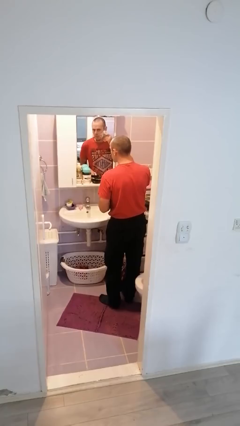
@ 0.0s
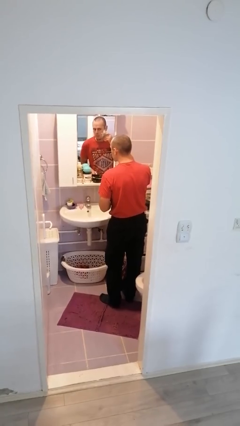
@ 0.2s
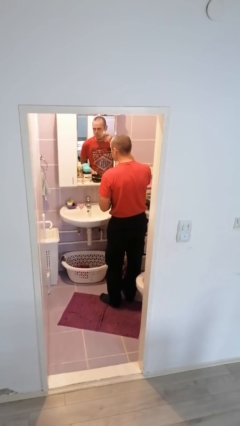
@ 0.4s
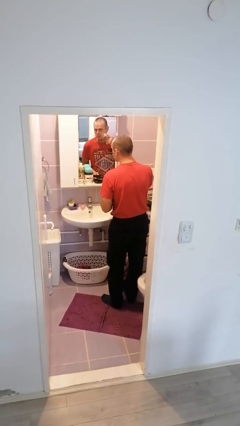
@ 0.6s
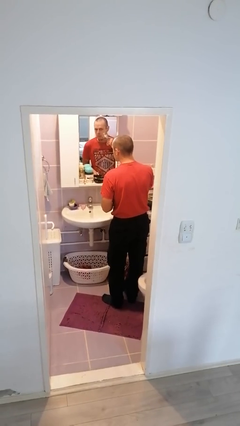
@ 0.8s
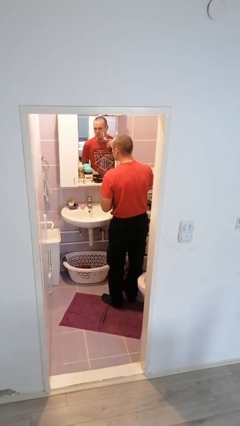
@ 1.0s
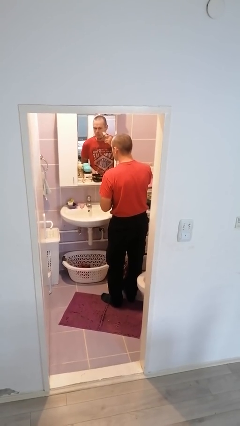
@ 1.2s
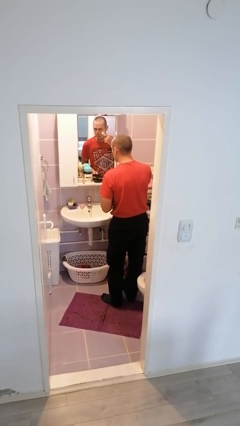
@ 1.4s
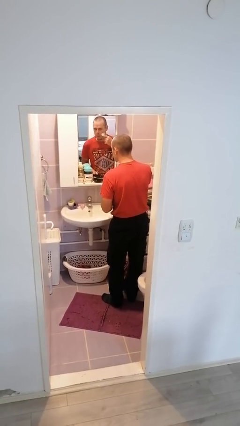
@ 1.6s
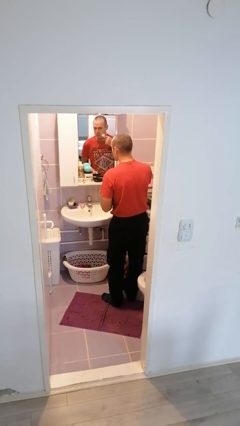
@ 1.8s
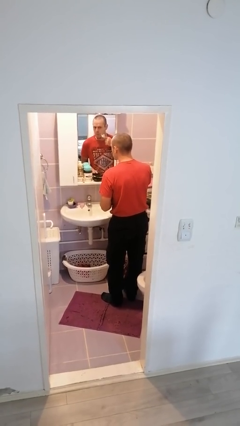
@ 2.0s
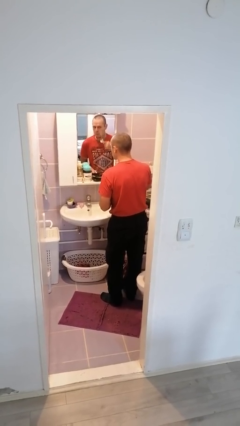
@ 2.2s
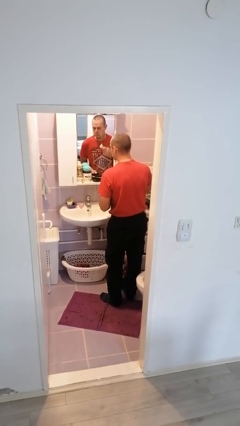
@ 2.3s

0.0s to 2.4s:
person shaves face

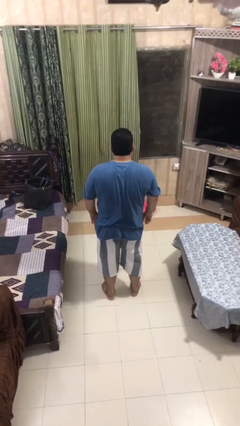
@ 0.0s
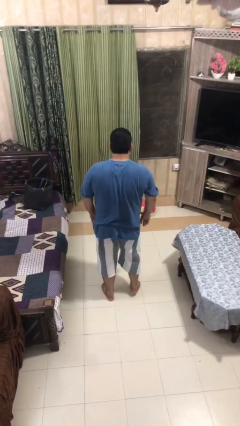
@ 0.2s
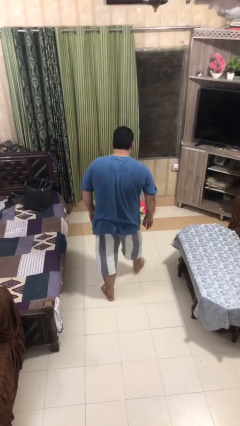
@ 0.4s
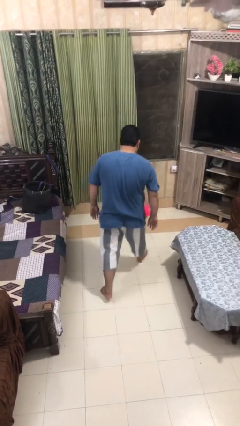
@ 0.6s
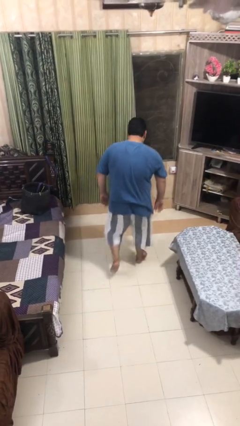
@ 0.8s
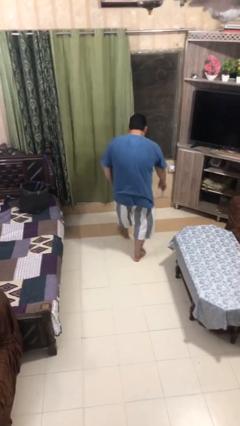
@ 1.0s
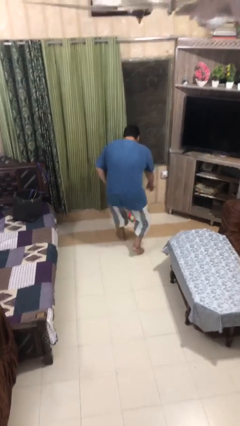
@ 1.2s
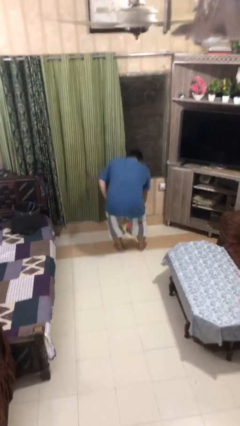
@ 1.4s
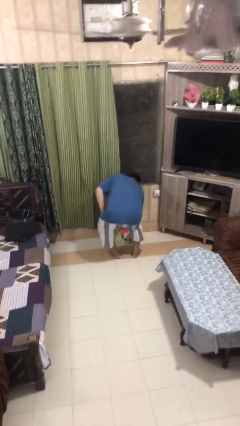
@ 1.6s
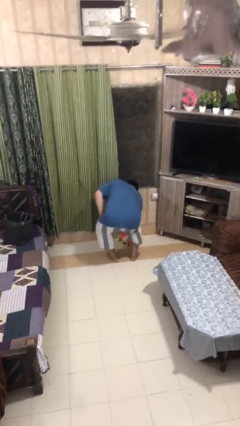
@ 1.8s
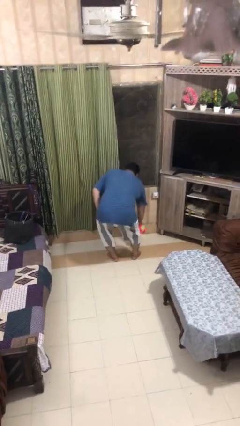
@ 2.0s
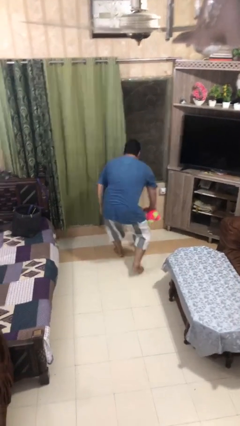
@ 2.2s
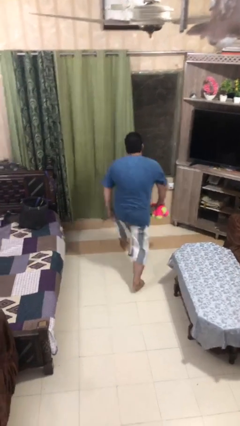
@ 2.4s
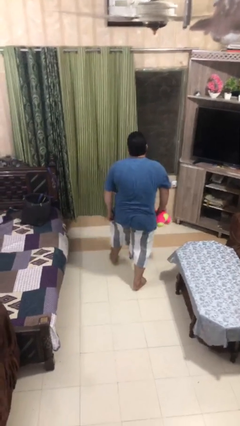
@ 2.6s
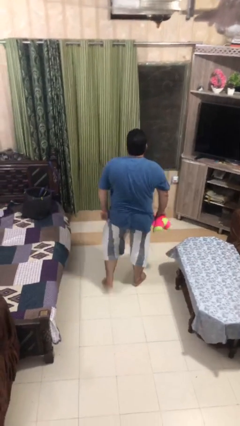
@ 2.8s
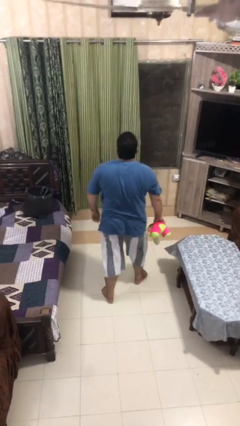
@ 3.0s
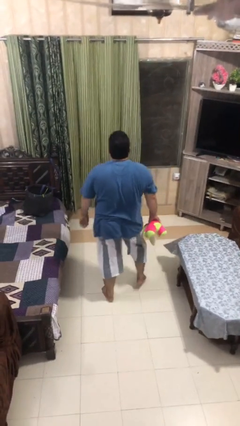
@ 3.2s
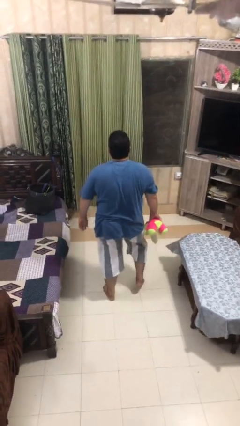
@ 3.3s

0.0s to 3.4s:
person picks up object from floor

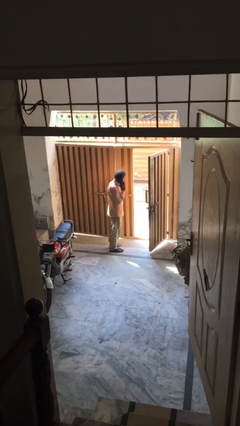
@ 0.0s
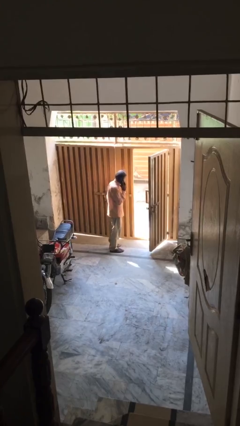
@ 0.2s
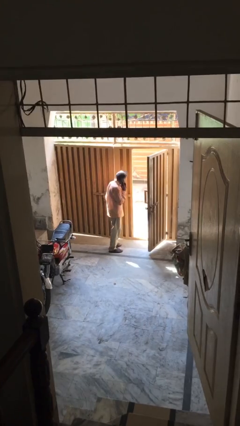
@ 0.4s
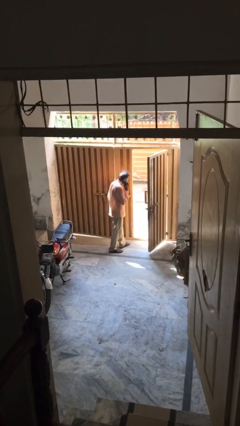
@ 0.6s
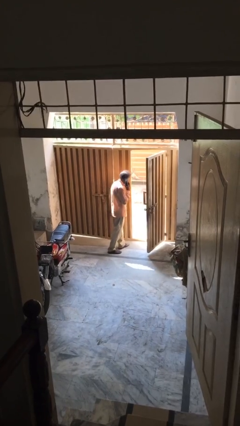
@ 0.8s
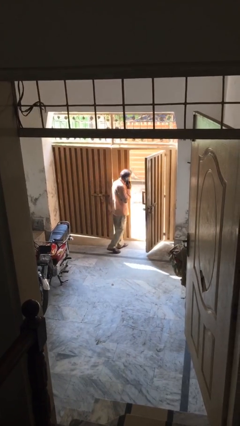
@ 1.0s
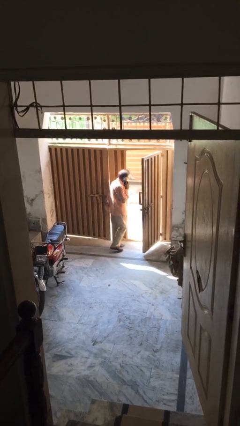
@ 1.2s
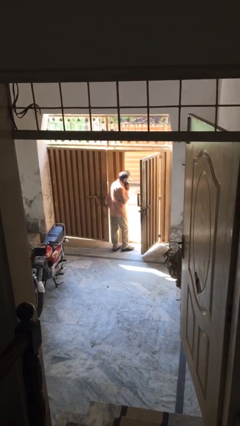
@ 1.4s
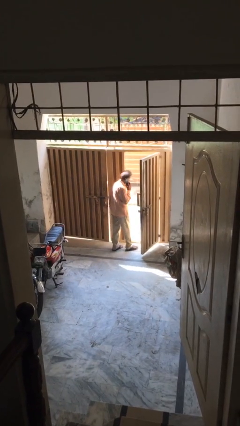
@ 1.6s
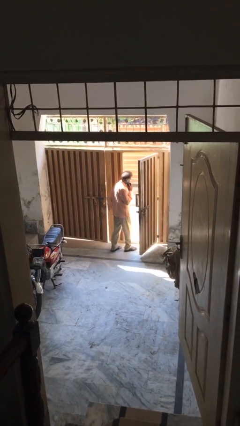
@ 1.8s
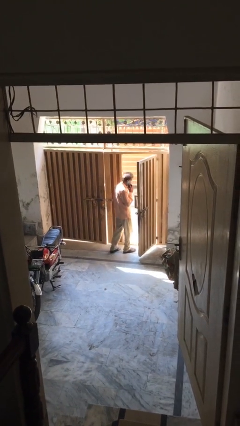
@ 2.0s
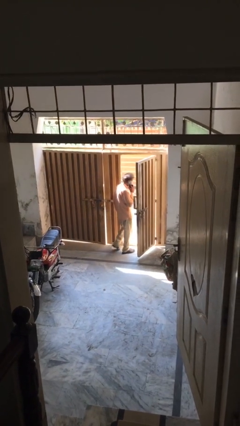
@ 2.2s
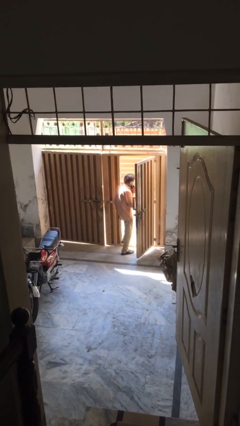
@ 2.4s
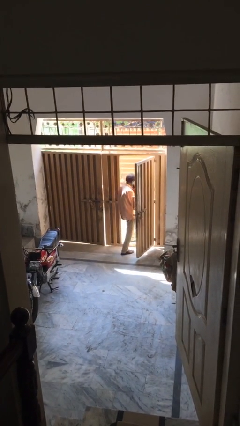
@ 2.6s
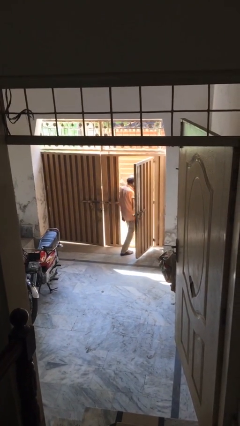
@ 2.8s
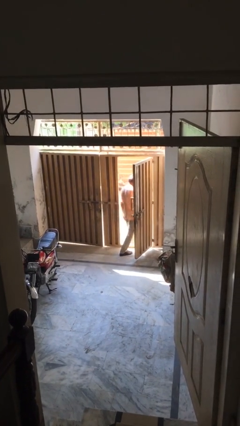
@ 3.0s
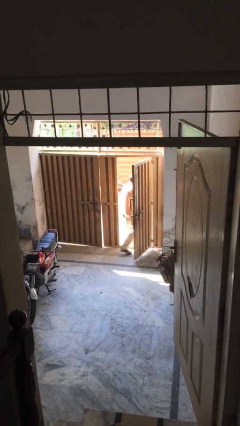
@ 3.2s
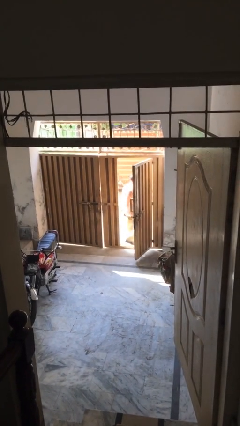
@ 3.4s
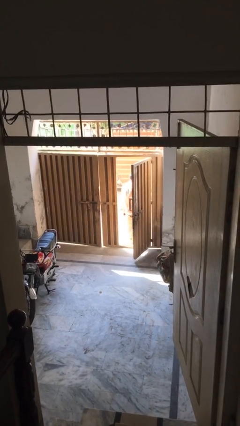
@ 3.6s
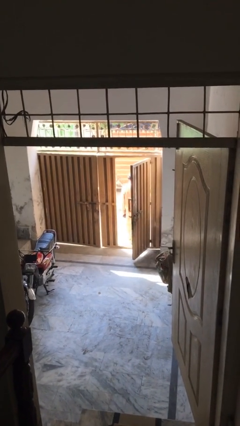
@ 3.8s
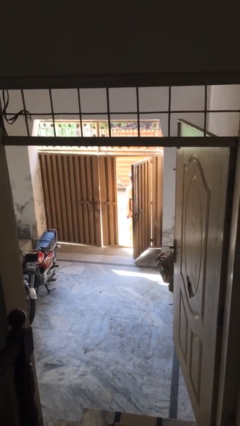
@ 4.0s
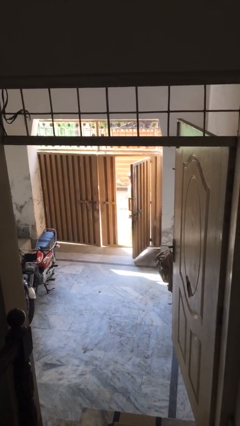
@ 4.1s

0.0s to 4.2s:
person exits scene through structure

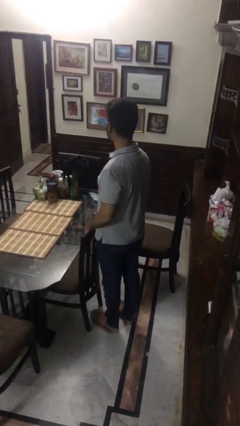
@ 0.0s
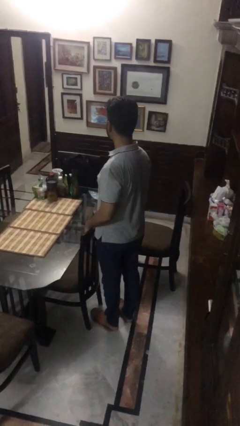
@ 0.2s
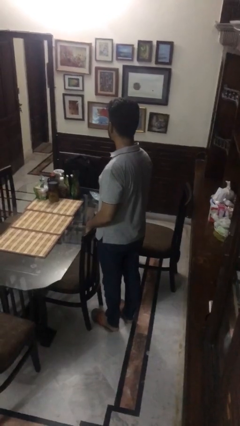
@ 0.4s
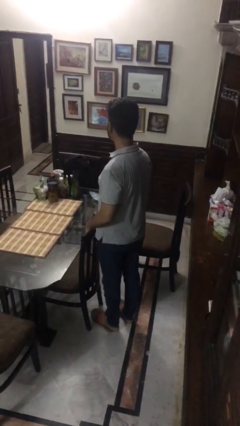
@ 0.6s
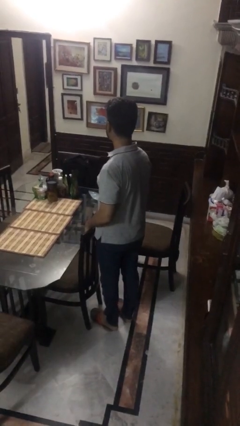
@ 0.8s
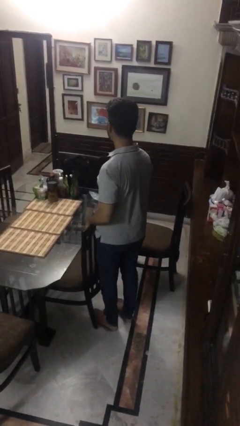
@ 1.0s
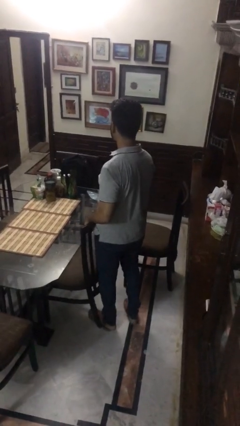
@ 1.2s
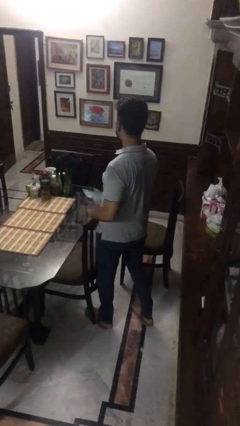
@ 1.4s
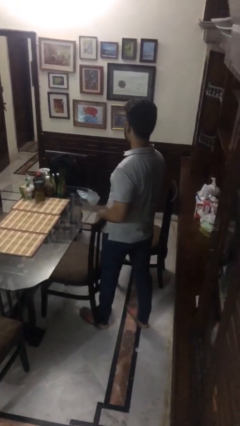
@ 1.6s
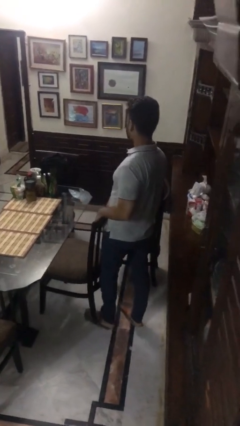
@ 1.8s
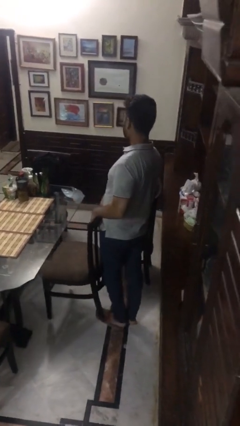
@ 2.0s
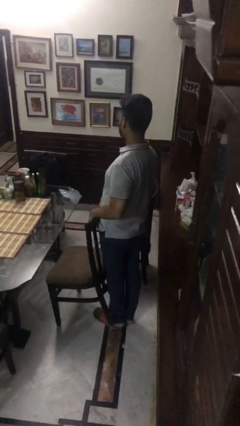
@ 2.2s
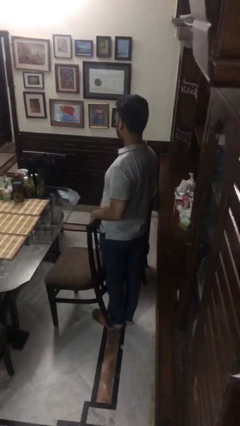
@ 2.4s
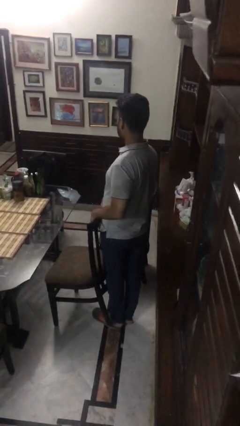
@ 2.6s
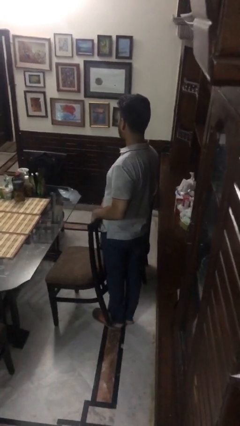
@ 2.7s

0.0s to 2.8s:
person pulls out chair

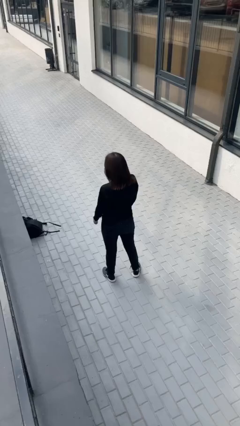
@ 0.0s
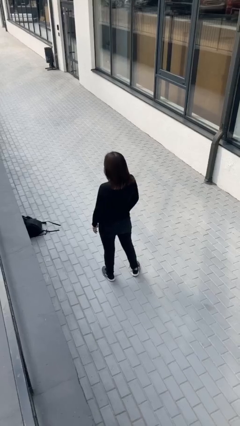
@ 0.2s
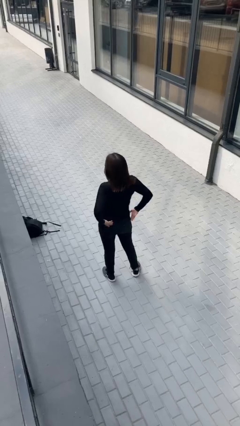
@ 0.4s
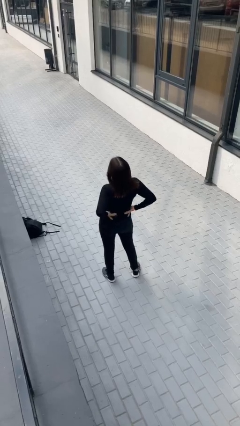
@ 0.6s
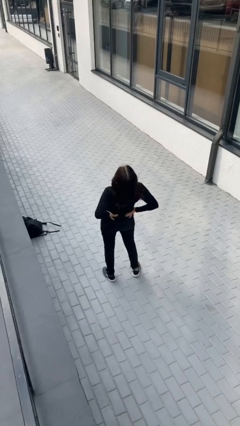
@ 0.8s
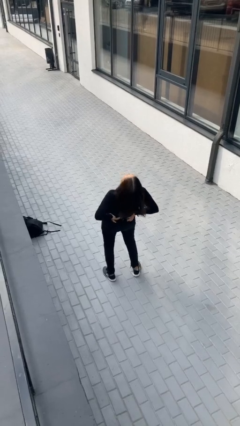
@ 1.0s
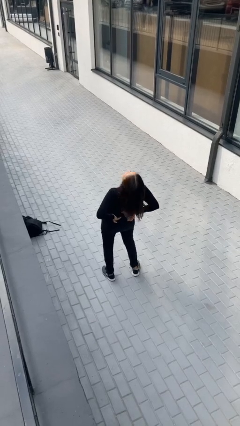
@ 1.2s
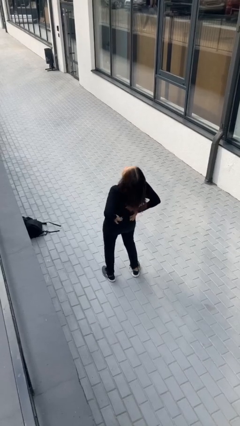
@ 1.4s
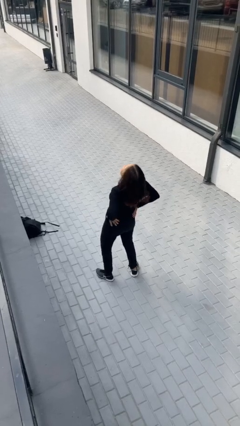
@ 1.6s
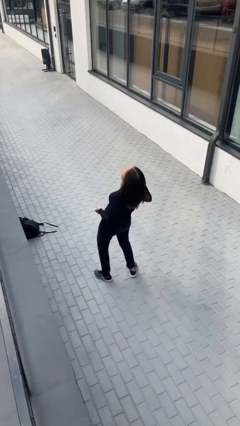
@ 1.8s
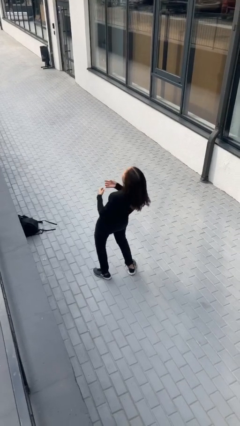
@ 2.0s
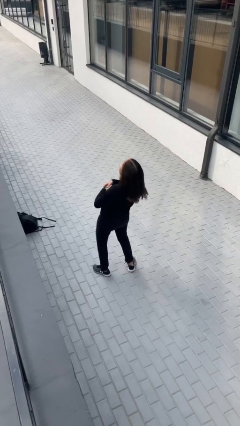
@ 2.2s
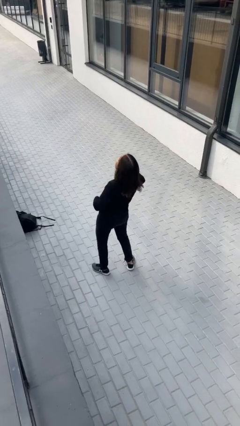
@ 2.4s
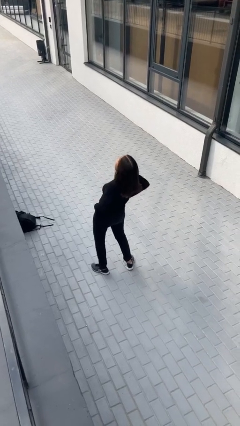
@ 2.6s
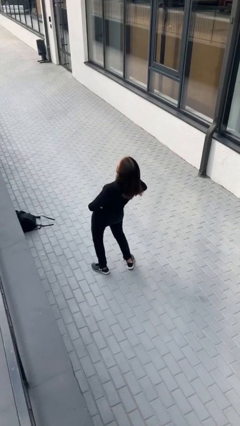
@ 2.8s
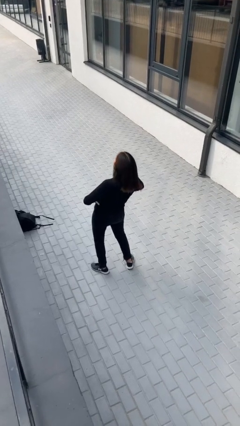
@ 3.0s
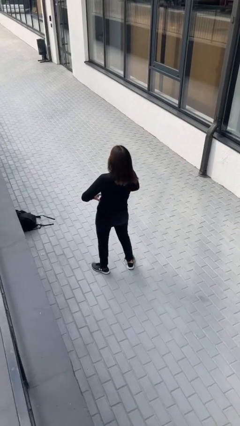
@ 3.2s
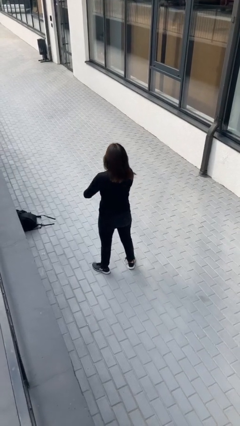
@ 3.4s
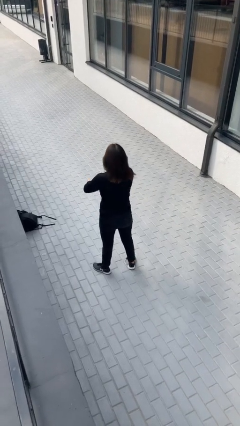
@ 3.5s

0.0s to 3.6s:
person stretches back

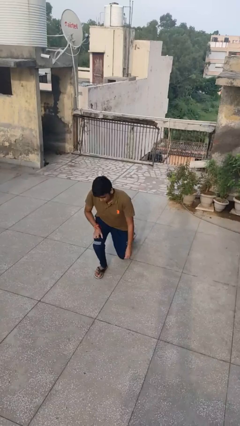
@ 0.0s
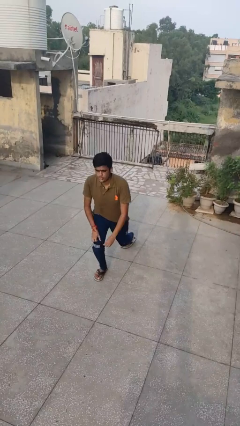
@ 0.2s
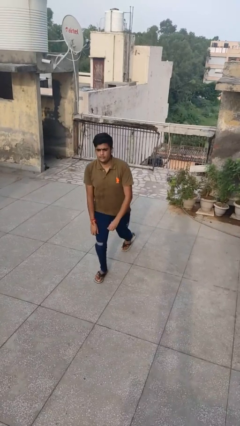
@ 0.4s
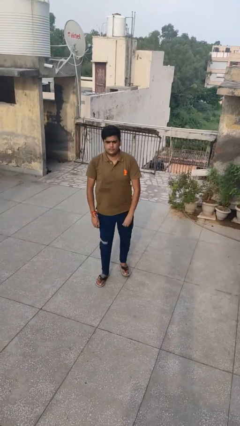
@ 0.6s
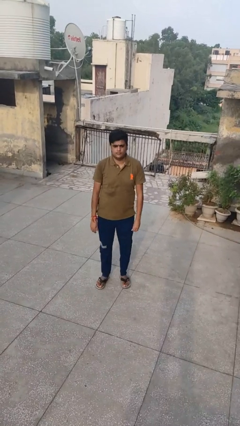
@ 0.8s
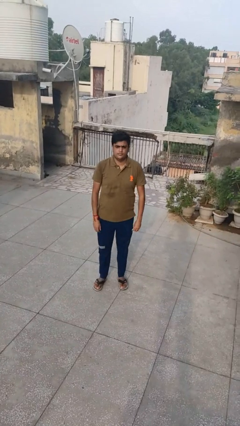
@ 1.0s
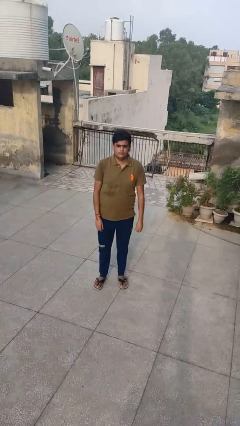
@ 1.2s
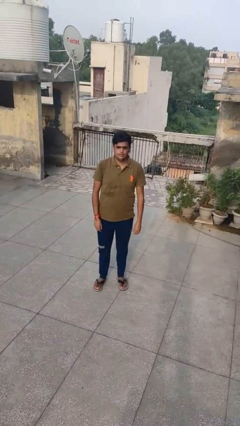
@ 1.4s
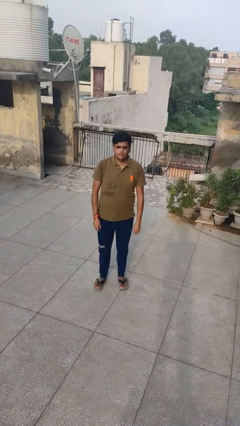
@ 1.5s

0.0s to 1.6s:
person stands up from floor
